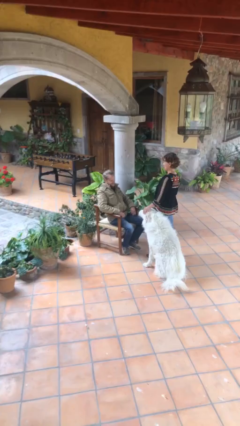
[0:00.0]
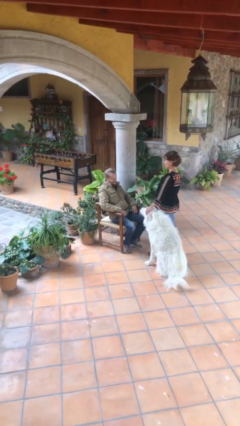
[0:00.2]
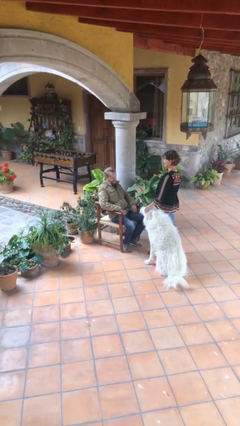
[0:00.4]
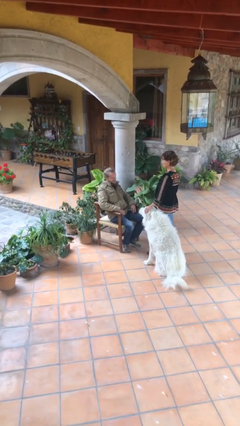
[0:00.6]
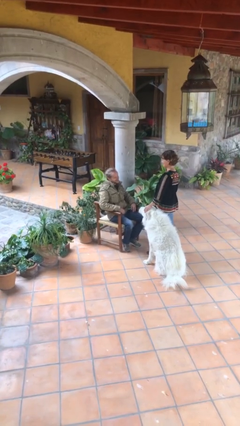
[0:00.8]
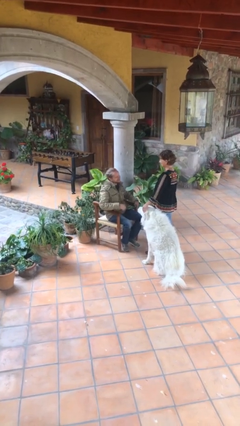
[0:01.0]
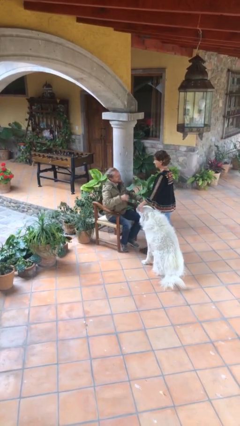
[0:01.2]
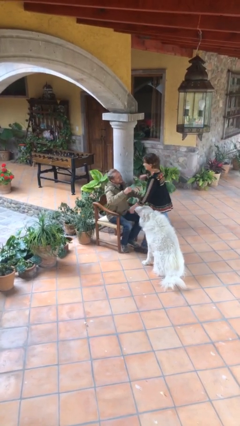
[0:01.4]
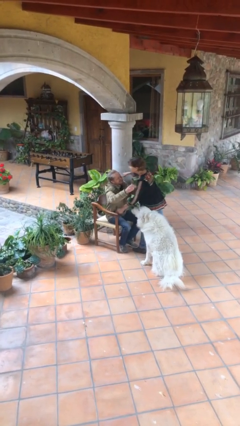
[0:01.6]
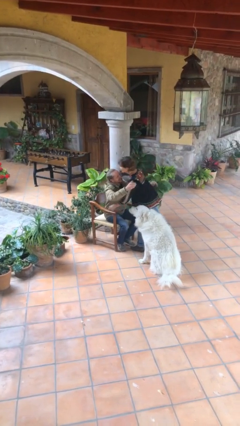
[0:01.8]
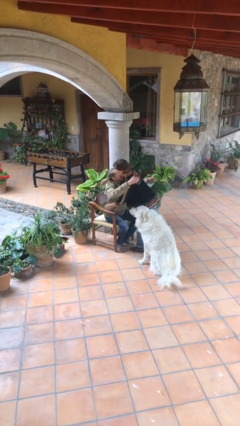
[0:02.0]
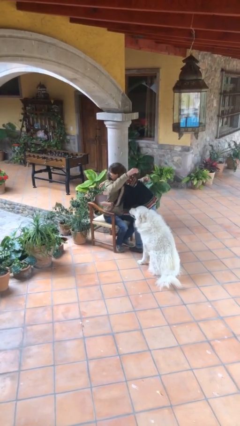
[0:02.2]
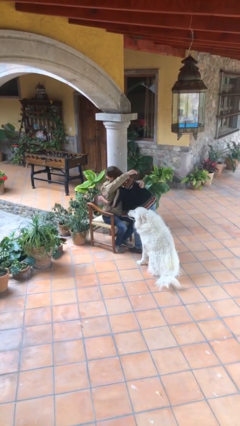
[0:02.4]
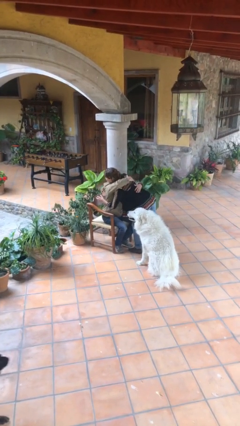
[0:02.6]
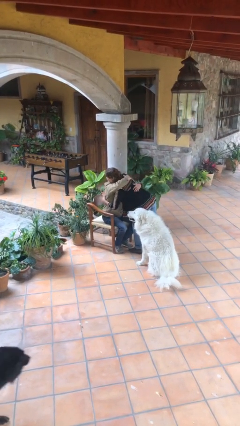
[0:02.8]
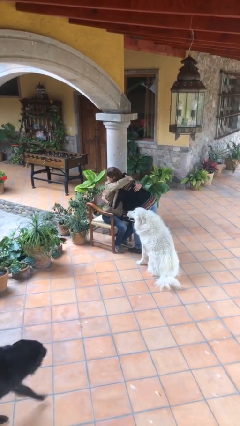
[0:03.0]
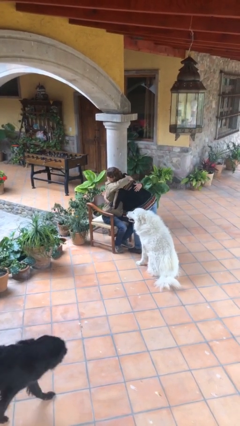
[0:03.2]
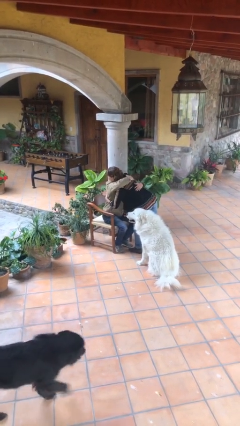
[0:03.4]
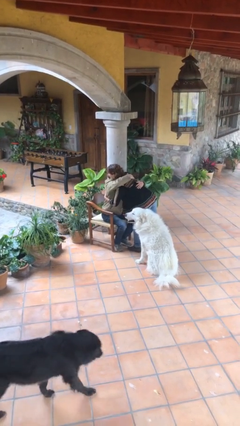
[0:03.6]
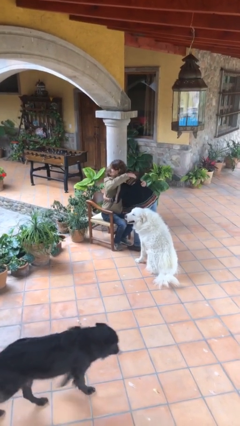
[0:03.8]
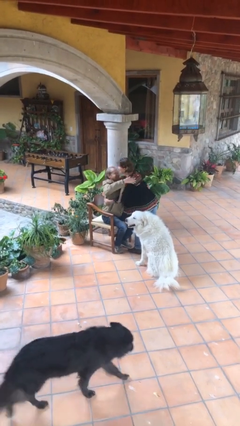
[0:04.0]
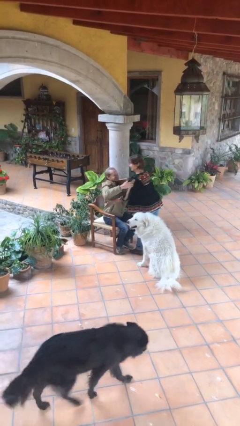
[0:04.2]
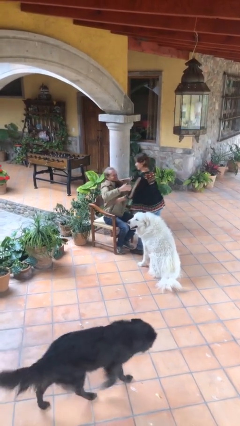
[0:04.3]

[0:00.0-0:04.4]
person embraces person

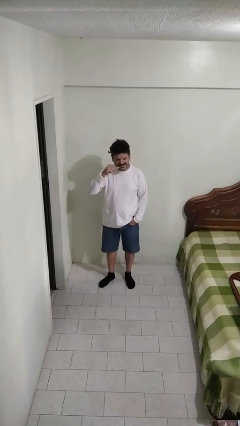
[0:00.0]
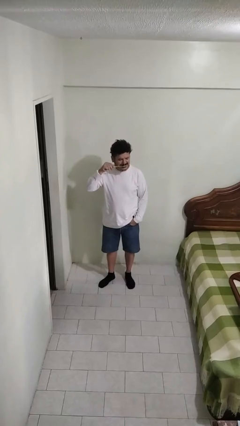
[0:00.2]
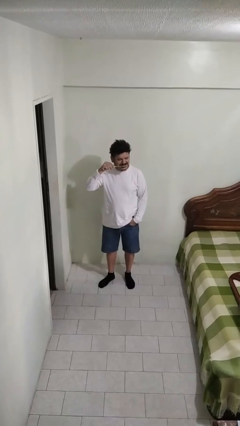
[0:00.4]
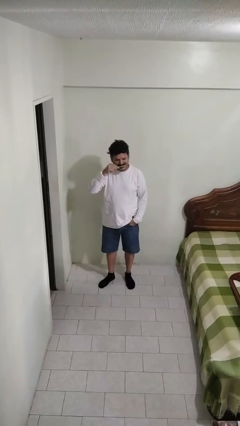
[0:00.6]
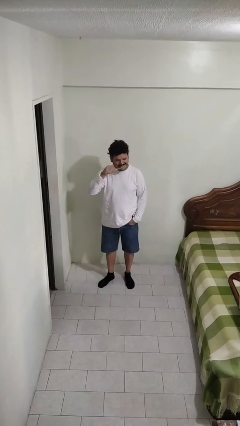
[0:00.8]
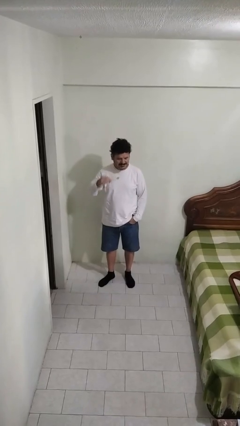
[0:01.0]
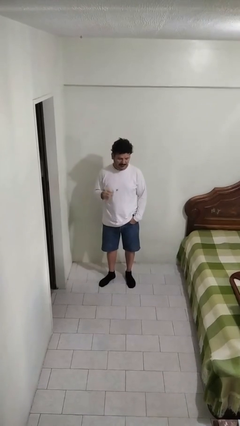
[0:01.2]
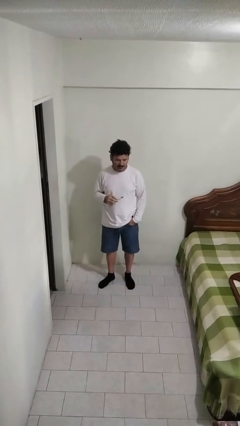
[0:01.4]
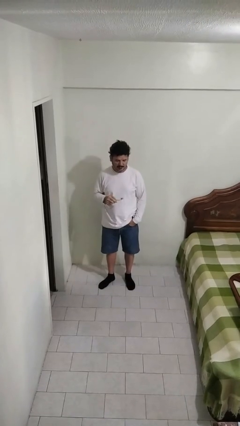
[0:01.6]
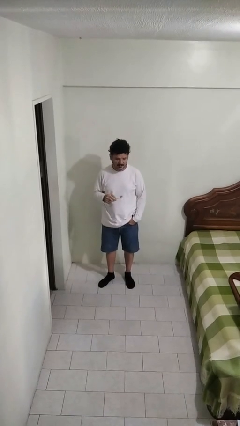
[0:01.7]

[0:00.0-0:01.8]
person brushes teeth

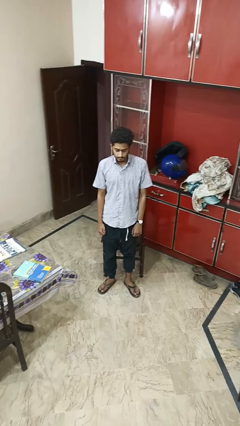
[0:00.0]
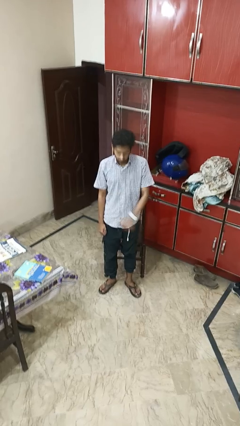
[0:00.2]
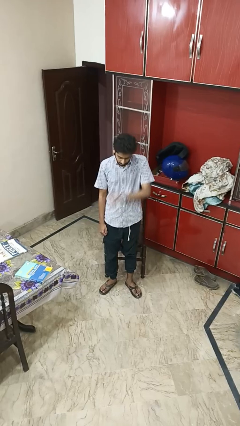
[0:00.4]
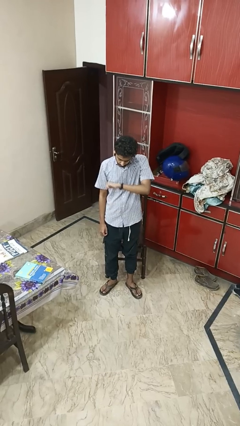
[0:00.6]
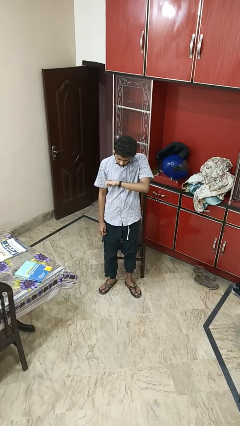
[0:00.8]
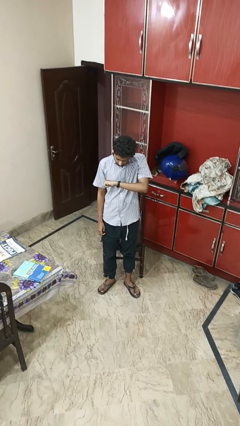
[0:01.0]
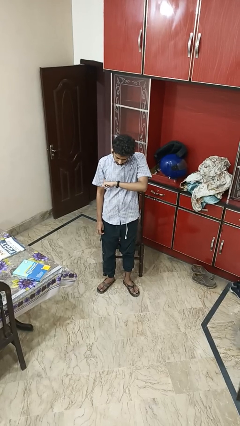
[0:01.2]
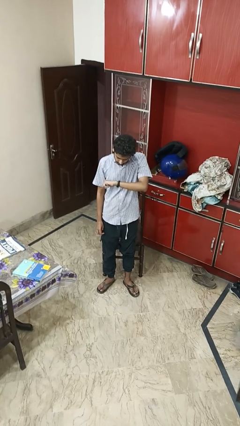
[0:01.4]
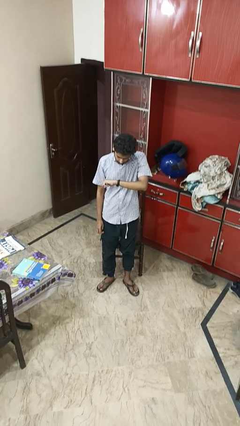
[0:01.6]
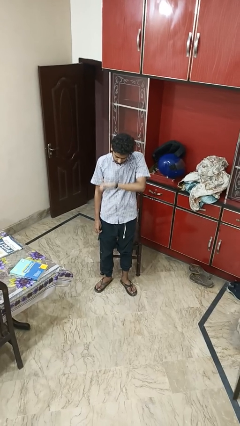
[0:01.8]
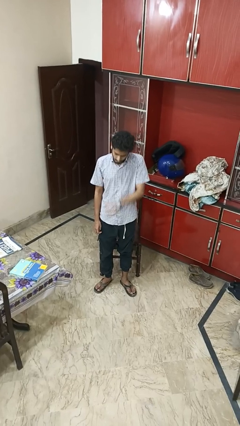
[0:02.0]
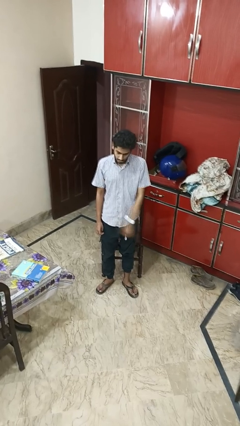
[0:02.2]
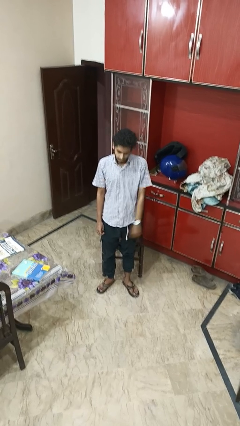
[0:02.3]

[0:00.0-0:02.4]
person looks at wristwatch

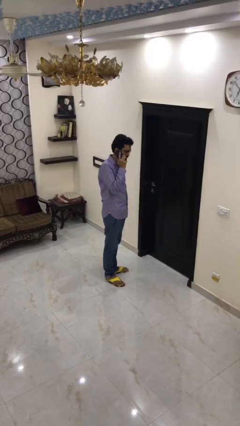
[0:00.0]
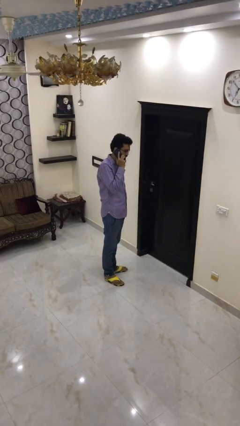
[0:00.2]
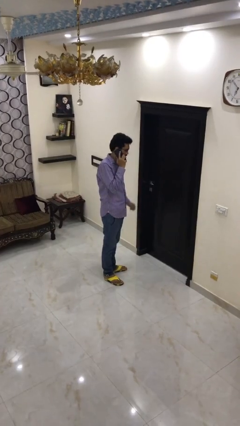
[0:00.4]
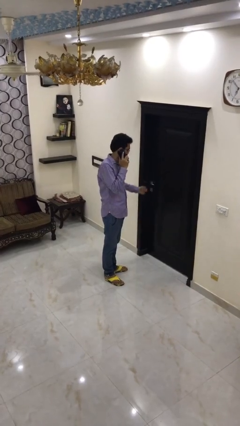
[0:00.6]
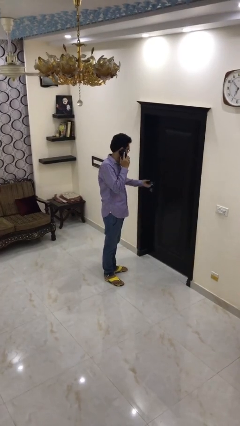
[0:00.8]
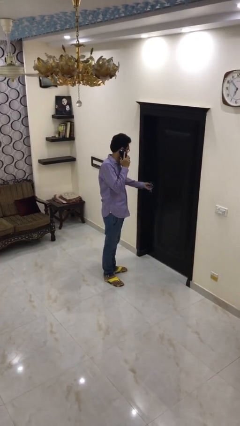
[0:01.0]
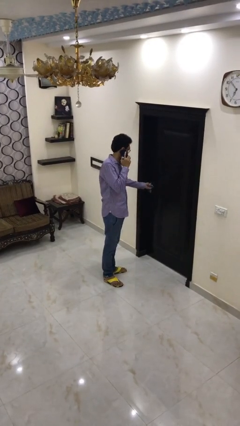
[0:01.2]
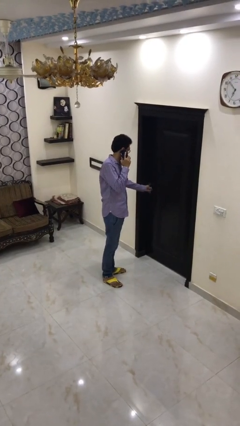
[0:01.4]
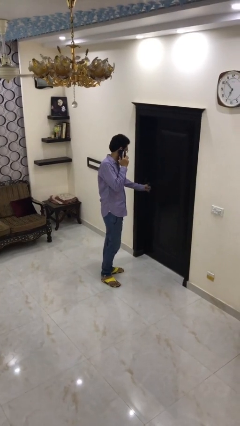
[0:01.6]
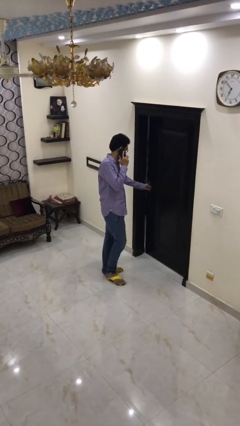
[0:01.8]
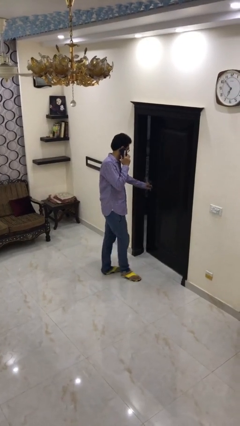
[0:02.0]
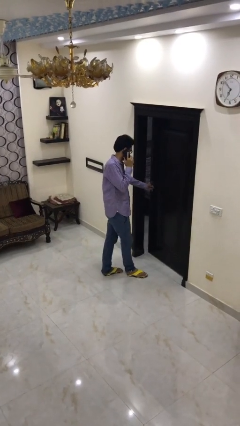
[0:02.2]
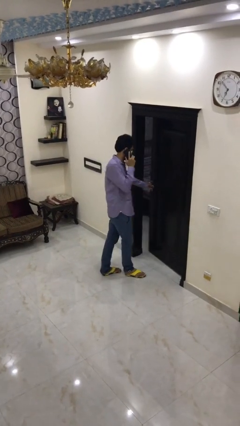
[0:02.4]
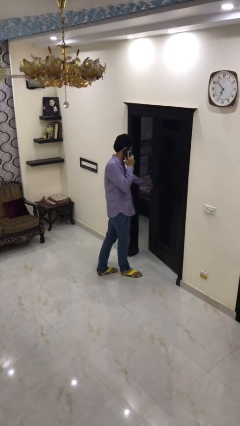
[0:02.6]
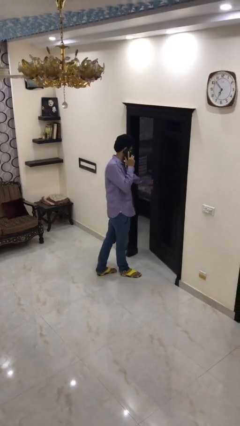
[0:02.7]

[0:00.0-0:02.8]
person opens facility door

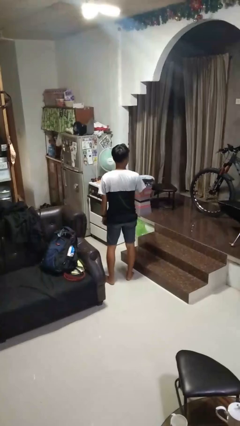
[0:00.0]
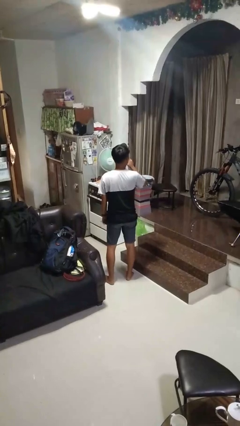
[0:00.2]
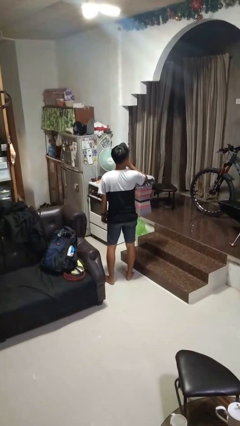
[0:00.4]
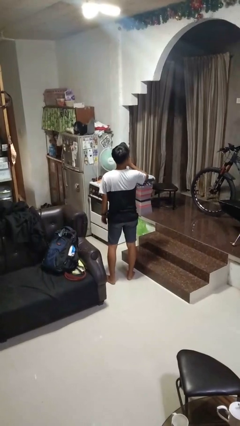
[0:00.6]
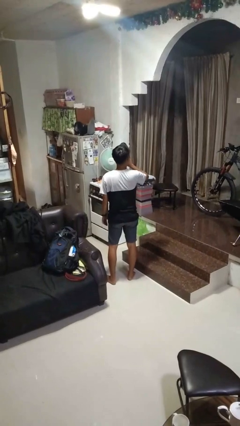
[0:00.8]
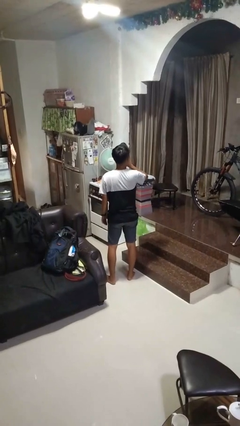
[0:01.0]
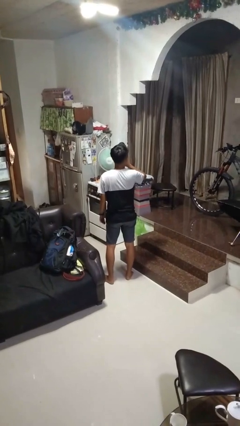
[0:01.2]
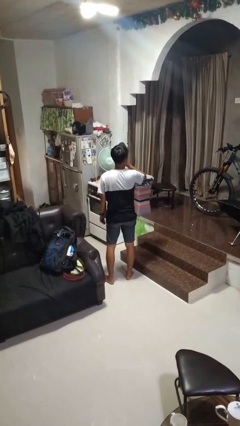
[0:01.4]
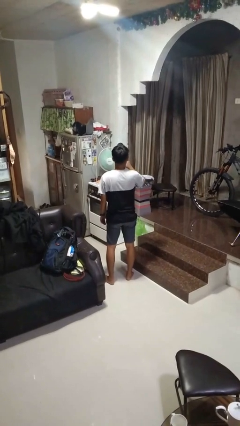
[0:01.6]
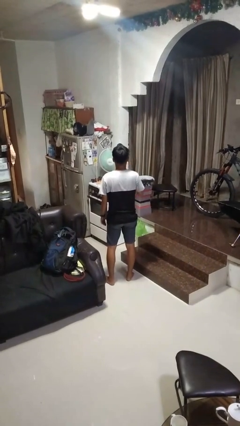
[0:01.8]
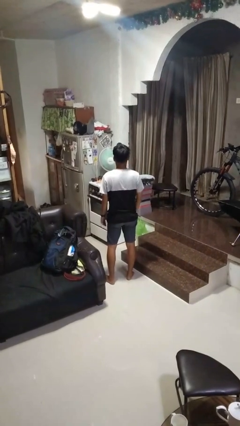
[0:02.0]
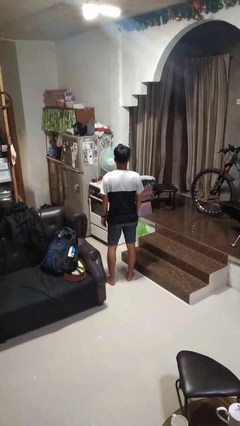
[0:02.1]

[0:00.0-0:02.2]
person gestures be quiet

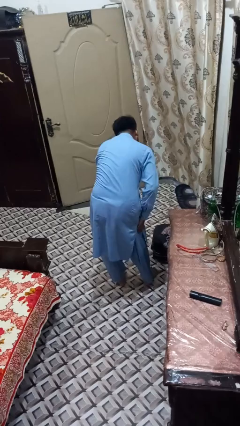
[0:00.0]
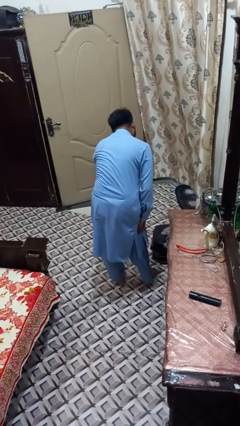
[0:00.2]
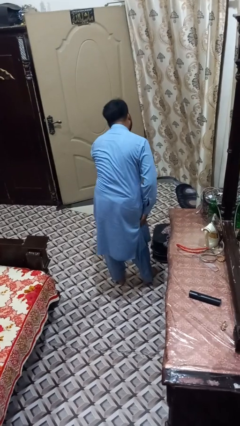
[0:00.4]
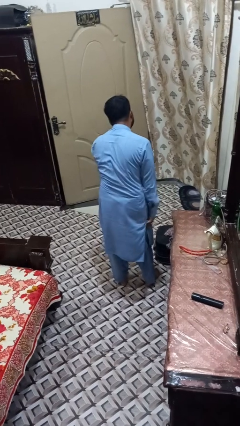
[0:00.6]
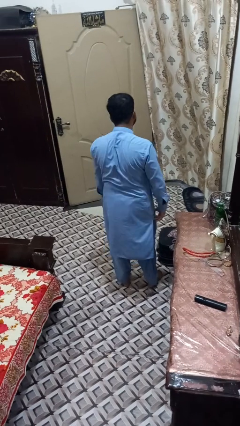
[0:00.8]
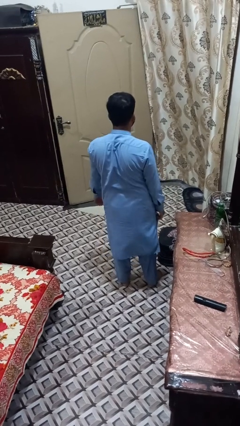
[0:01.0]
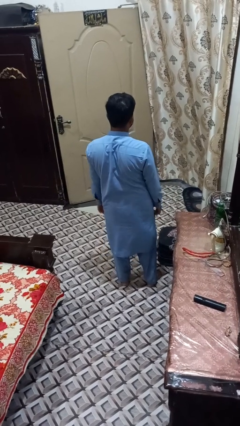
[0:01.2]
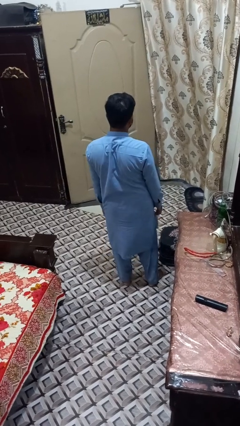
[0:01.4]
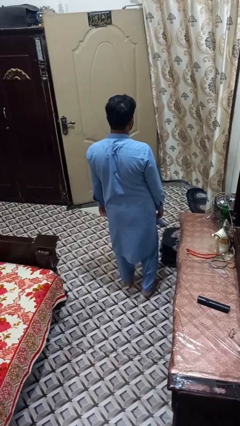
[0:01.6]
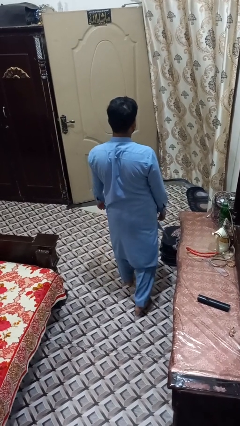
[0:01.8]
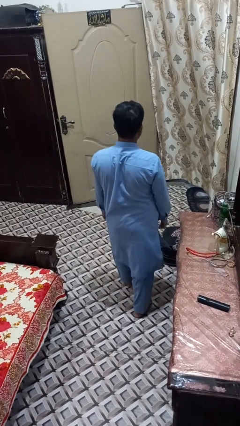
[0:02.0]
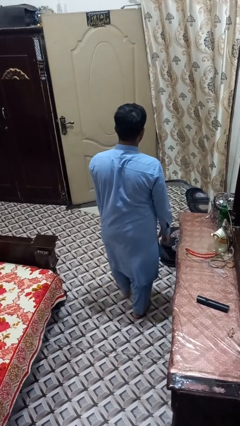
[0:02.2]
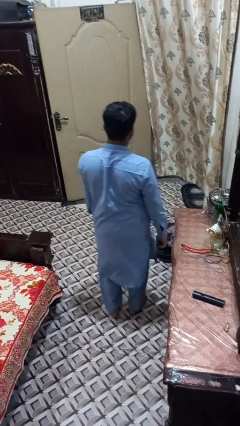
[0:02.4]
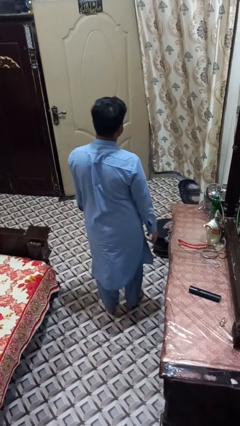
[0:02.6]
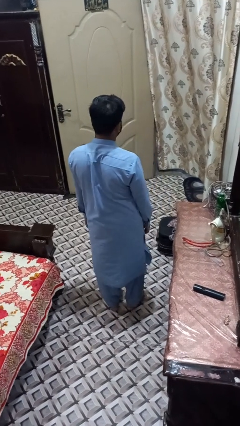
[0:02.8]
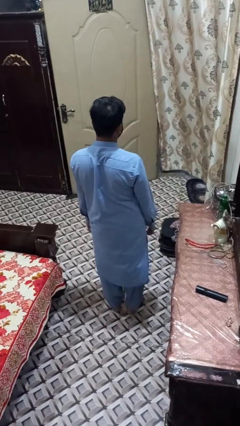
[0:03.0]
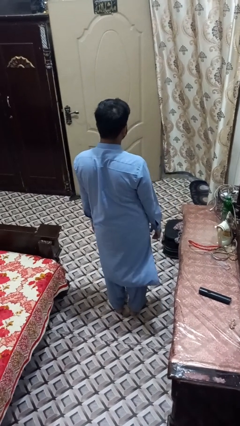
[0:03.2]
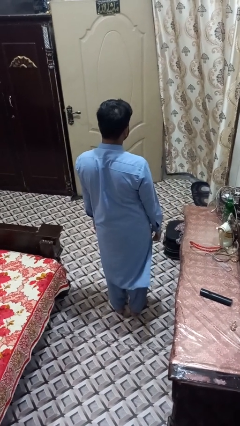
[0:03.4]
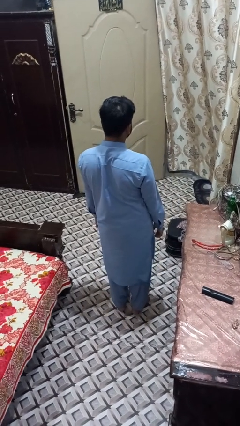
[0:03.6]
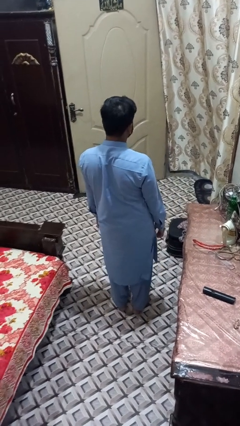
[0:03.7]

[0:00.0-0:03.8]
person bumps into table

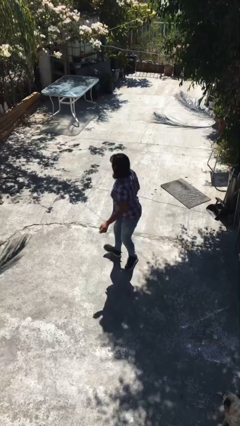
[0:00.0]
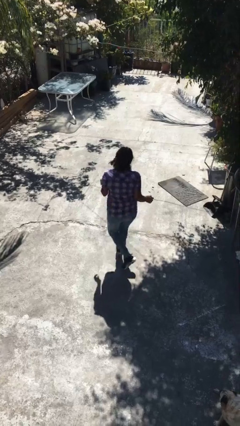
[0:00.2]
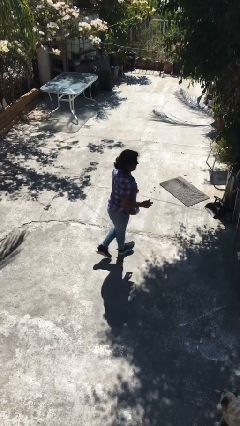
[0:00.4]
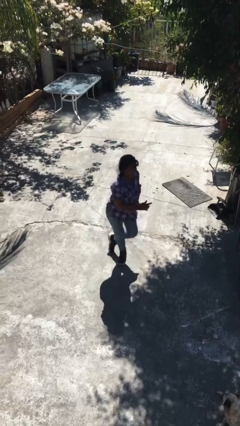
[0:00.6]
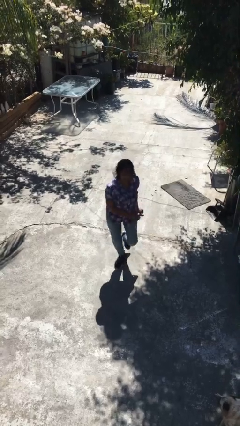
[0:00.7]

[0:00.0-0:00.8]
person twirls
